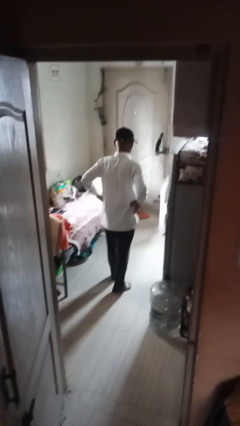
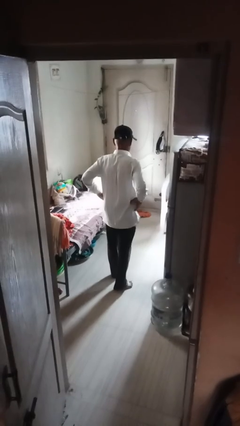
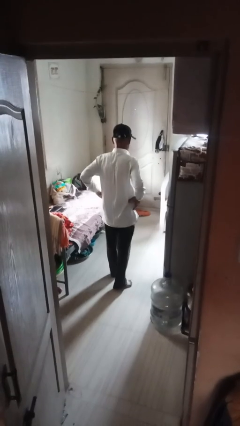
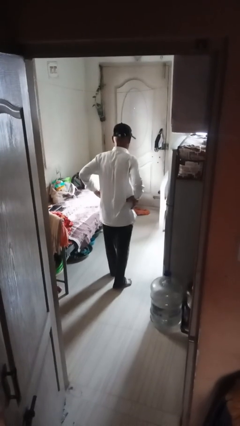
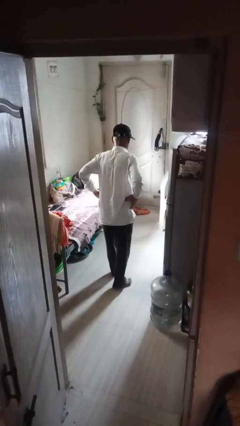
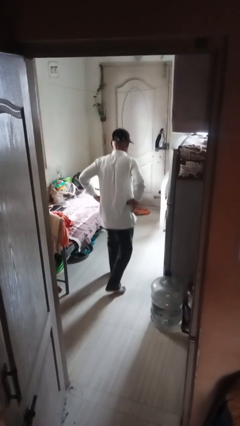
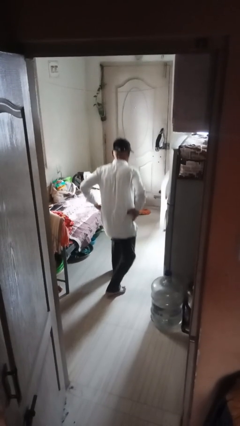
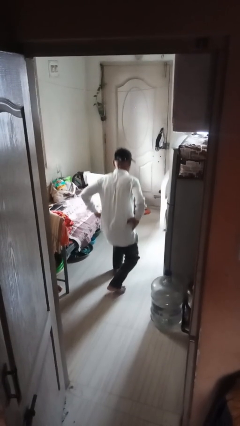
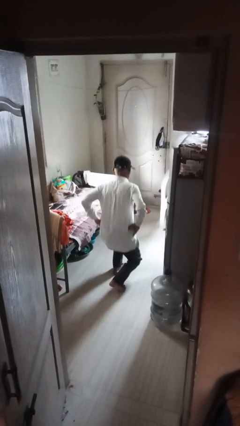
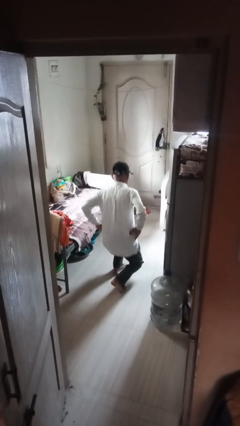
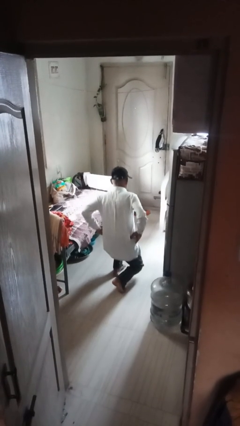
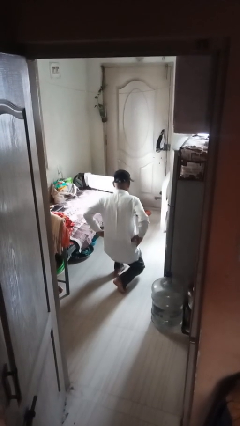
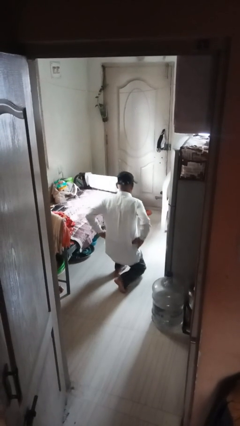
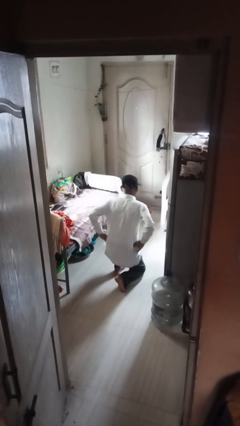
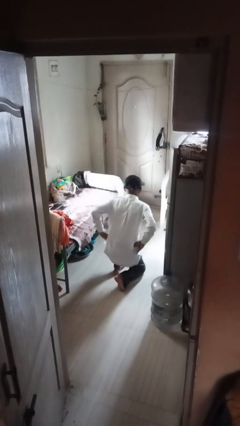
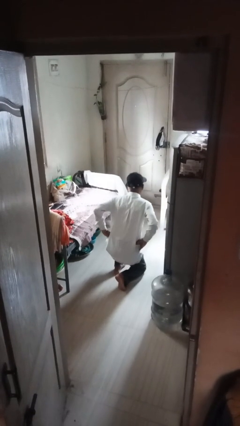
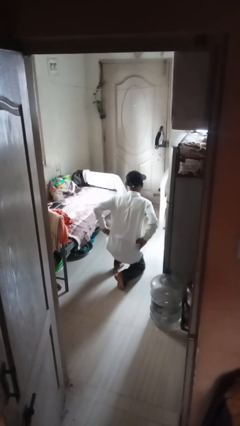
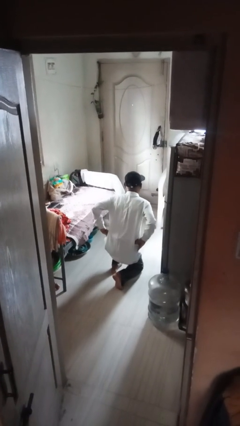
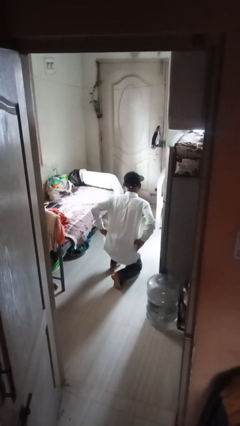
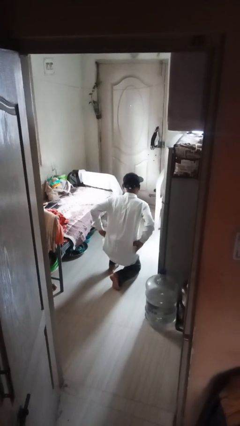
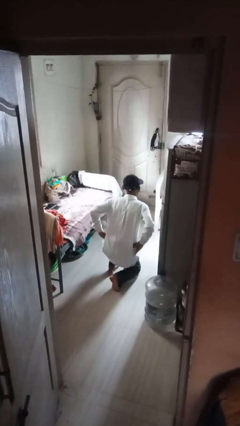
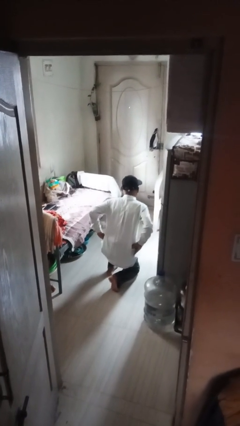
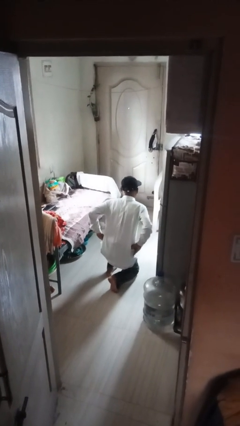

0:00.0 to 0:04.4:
person exercises with lunges

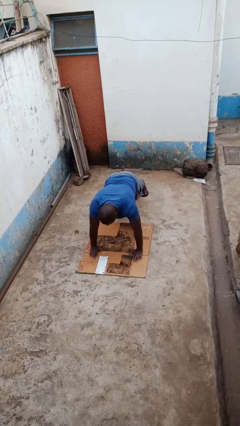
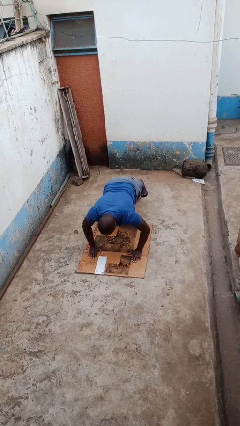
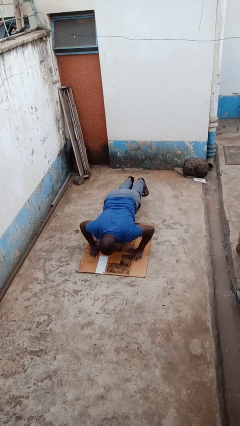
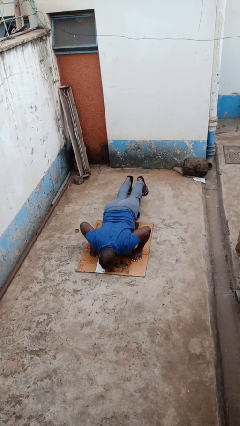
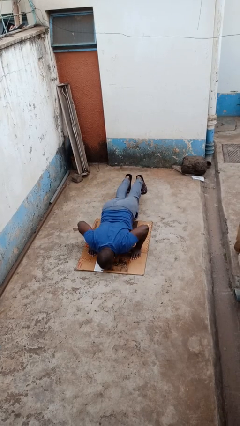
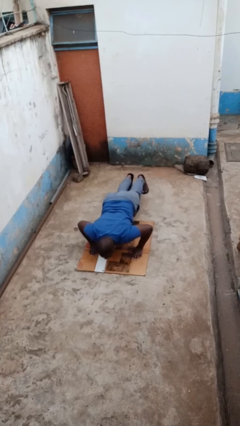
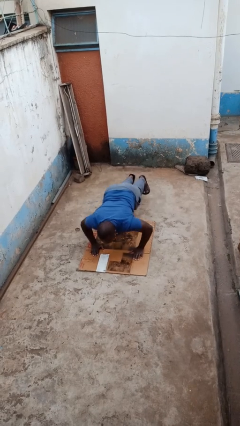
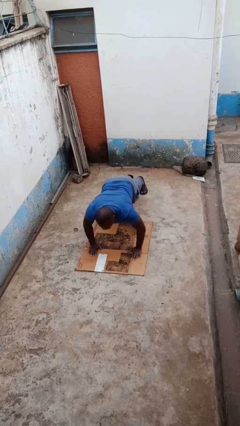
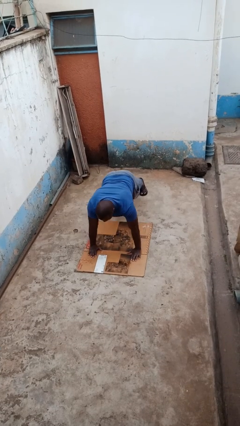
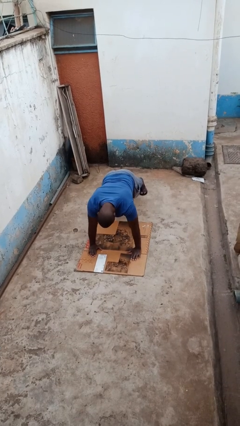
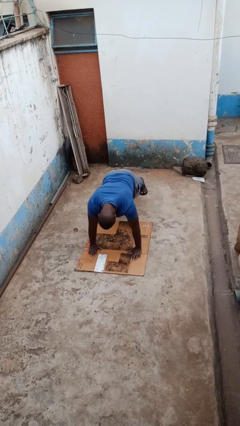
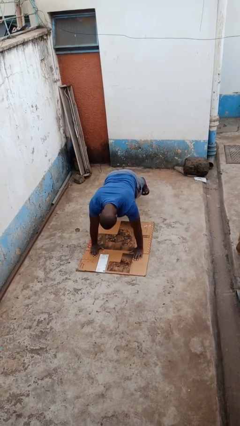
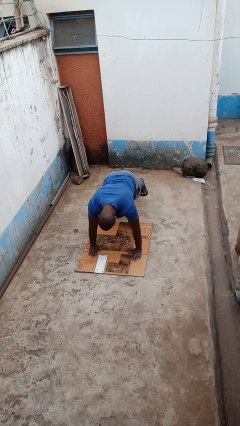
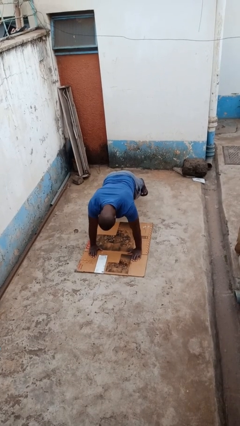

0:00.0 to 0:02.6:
person exercises with pushup

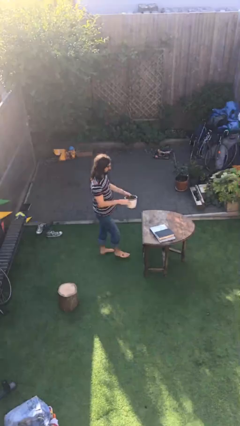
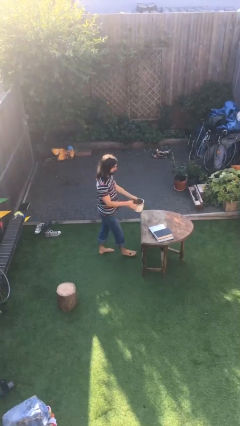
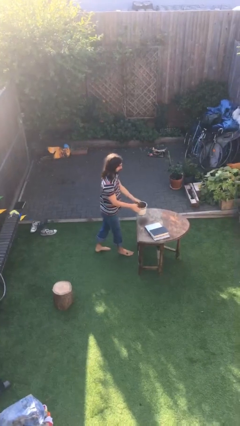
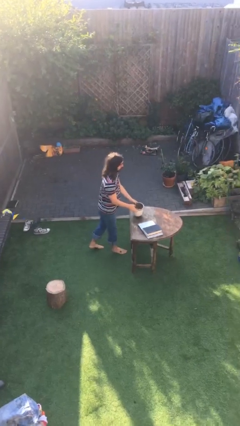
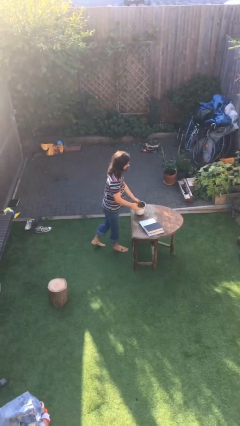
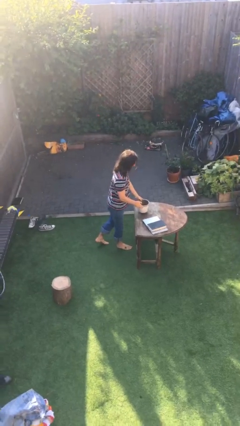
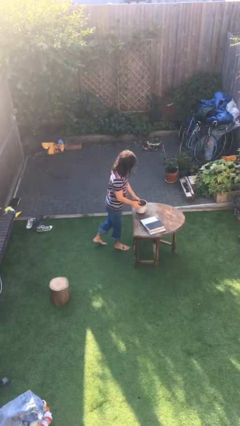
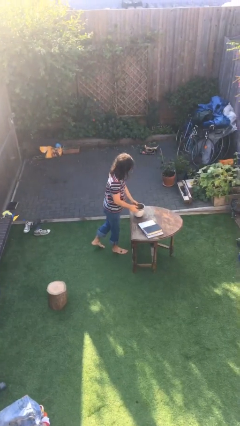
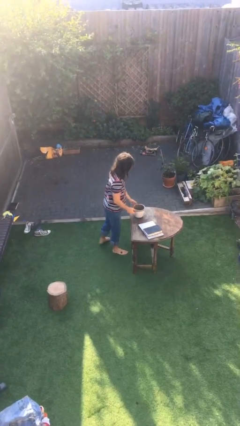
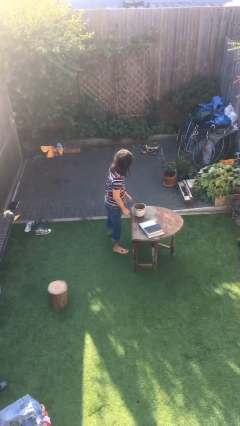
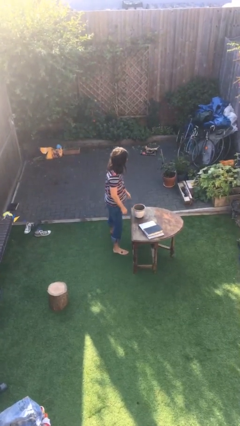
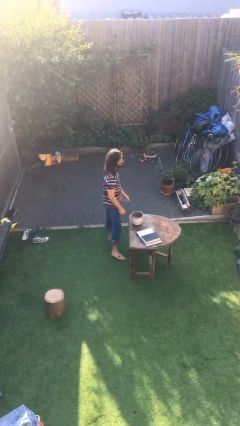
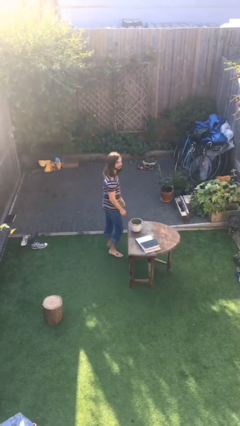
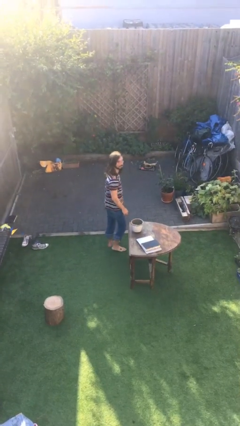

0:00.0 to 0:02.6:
person puts down object on table

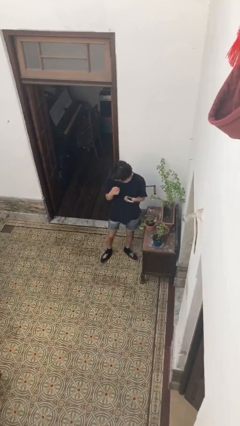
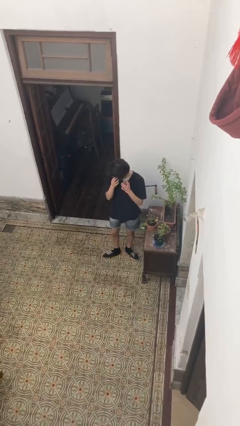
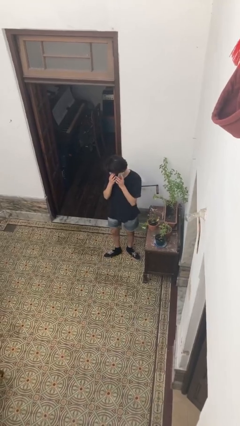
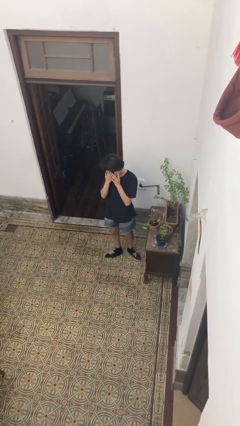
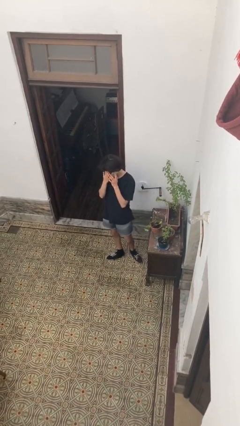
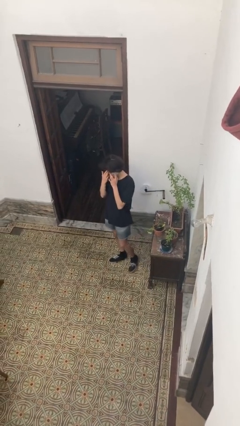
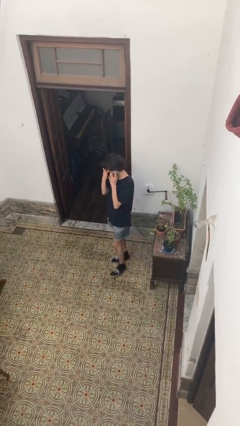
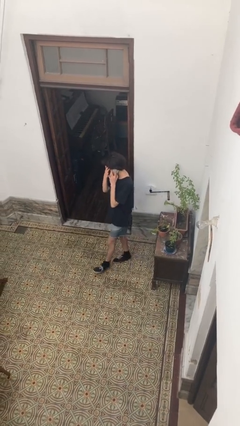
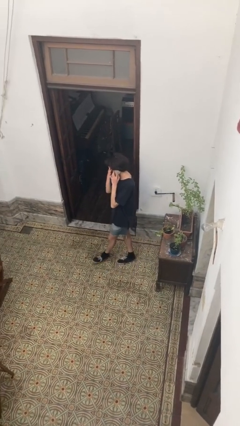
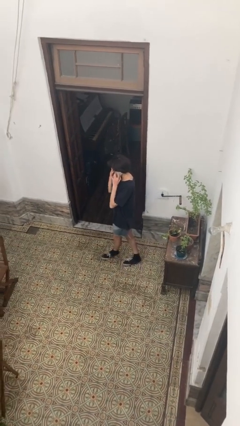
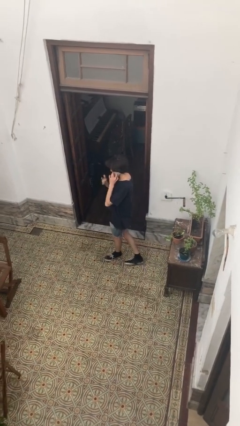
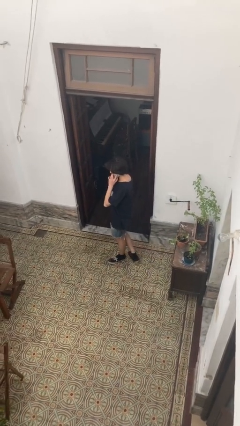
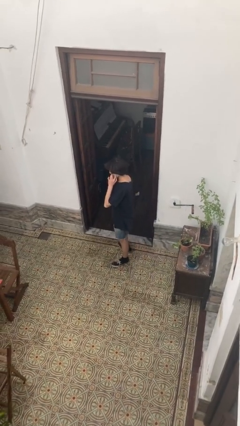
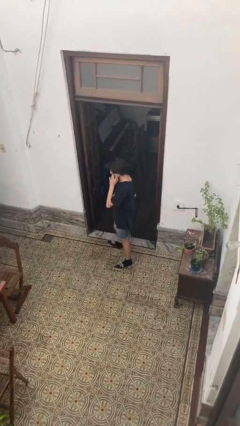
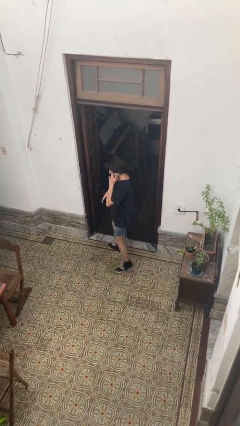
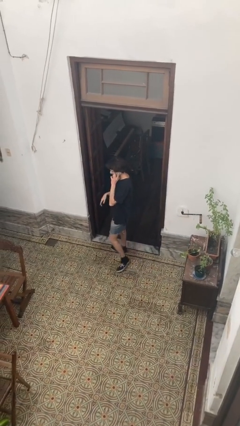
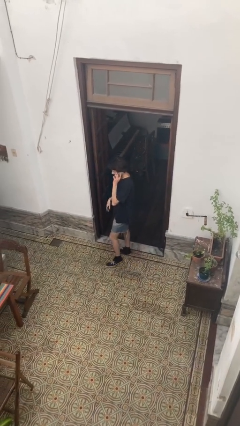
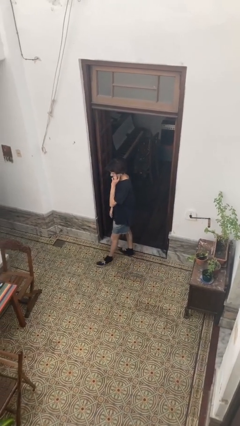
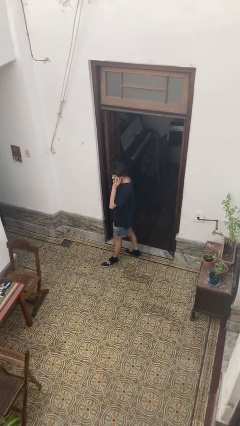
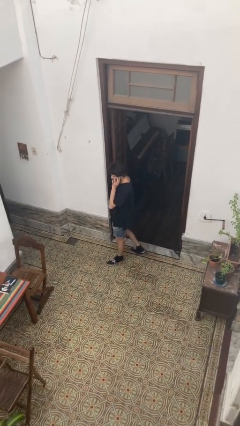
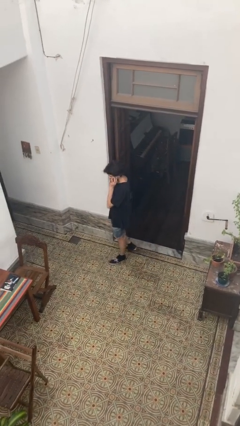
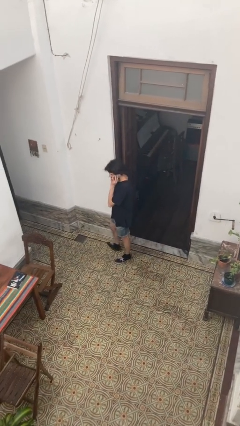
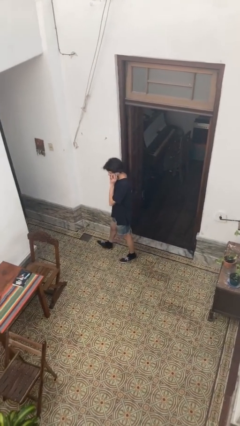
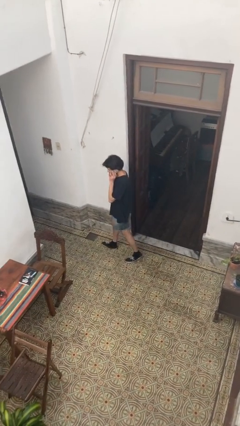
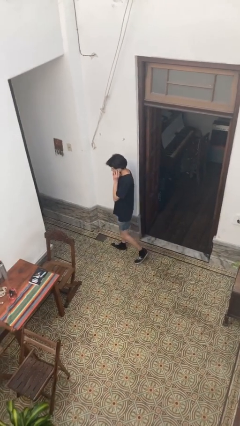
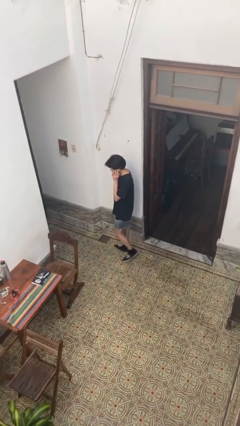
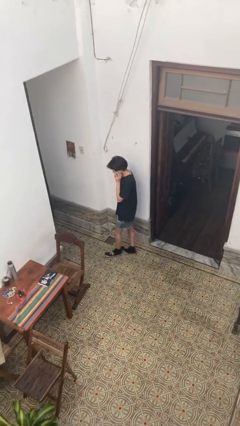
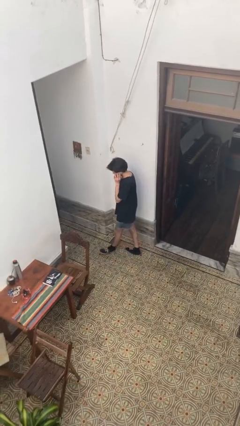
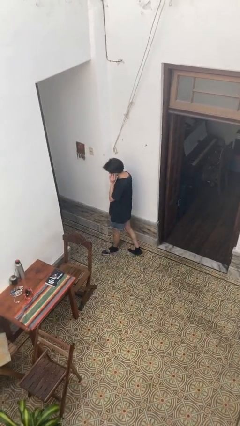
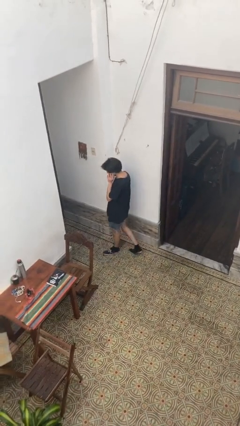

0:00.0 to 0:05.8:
person talks on phone

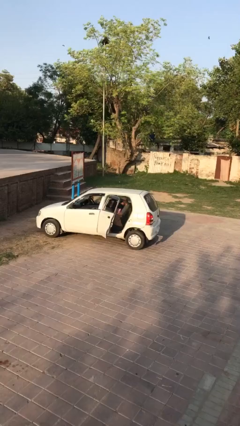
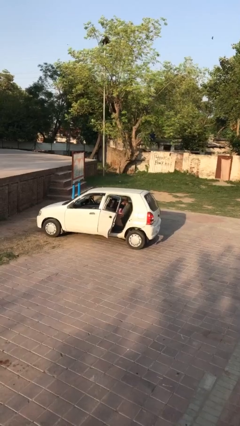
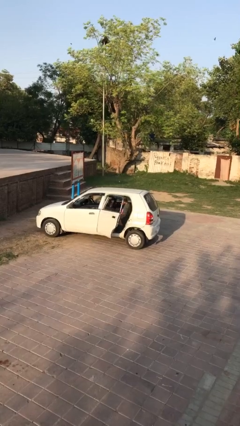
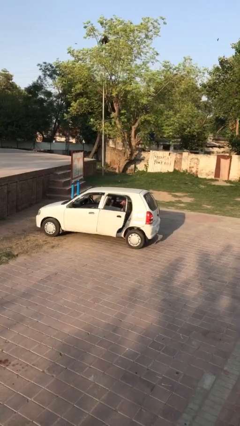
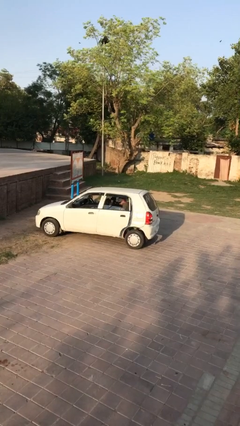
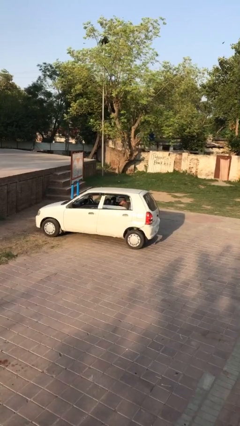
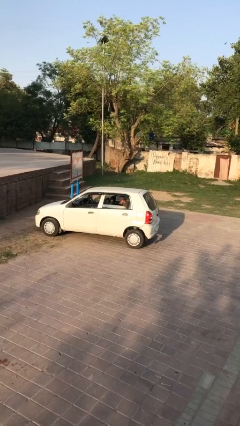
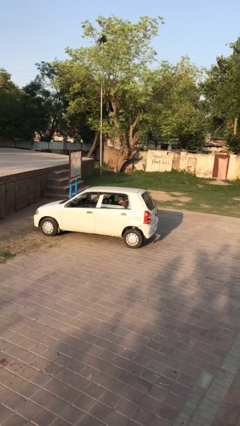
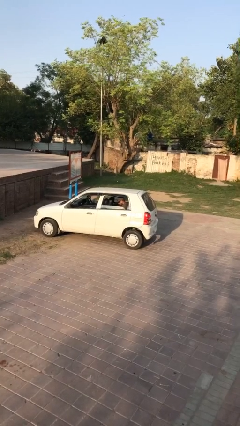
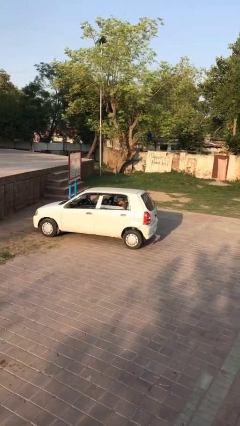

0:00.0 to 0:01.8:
person closes car door

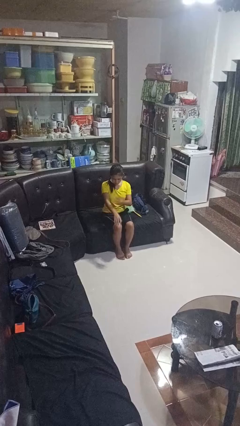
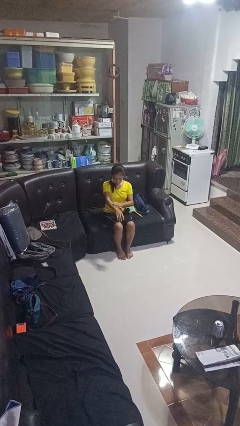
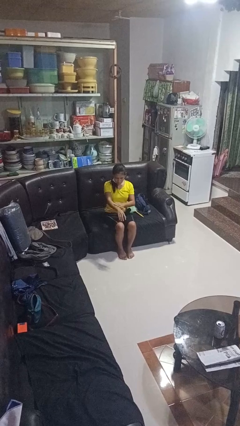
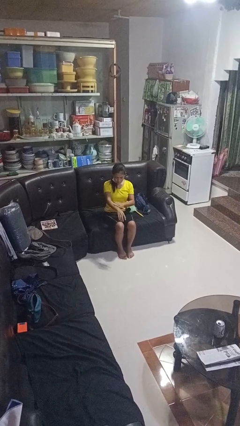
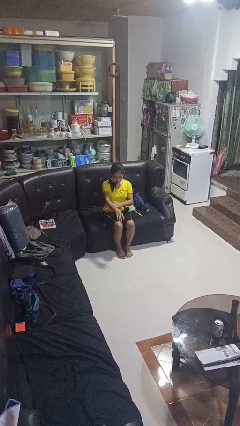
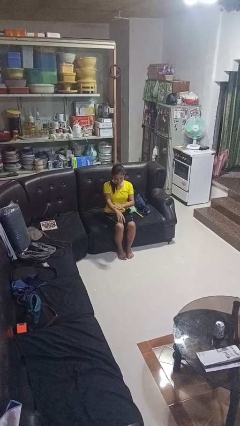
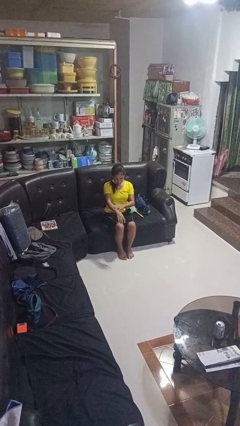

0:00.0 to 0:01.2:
person swats bug
